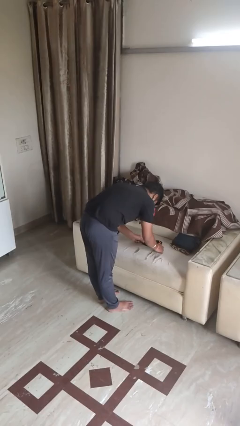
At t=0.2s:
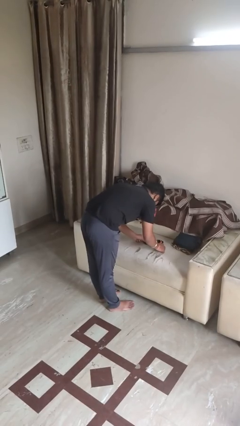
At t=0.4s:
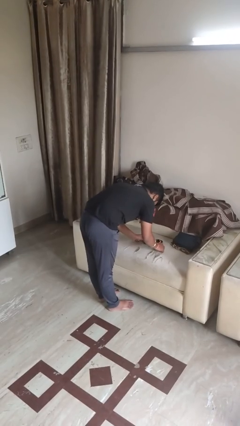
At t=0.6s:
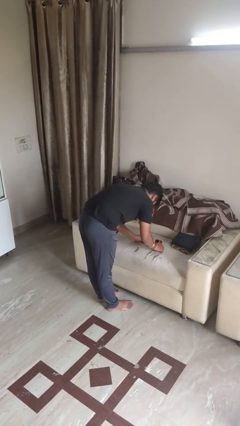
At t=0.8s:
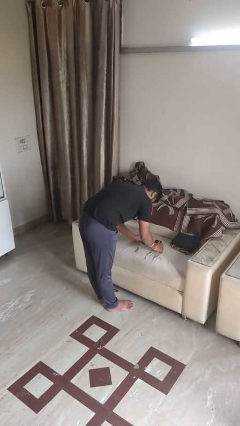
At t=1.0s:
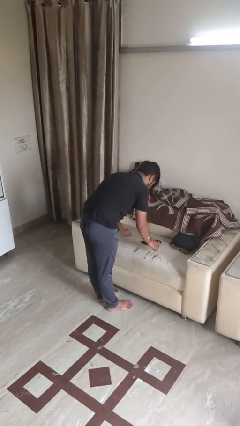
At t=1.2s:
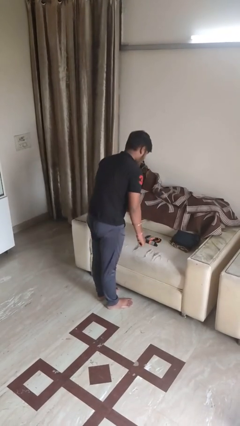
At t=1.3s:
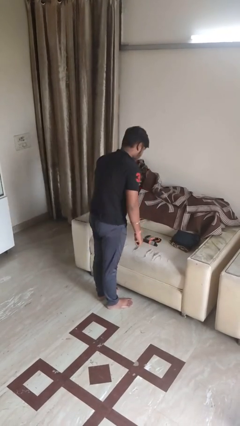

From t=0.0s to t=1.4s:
person folds socks

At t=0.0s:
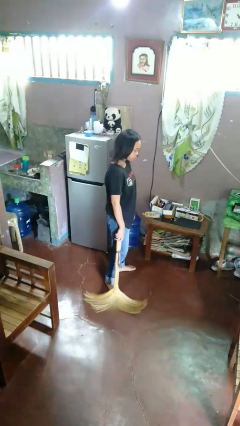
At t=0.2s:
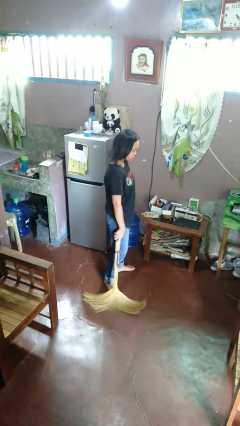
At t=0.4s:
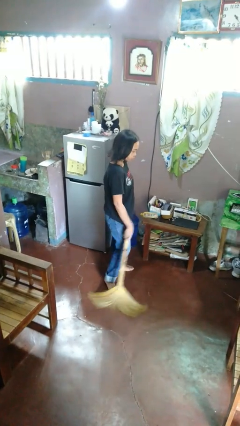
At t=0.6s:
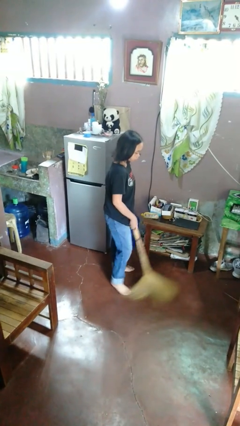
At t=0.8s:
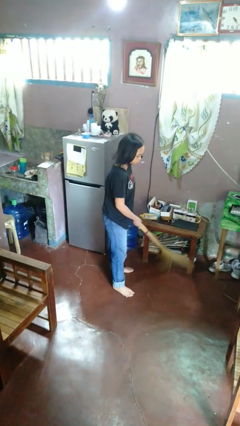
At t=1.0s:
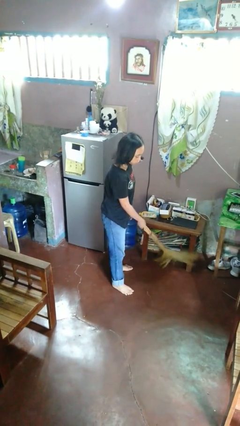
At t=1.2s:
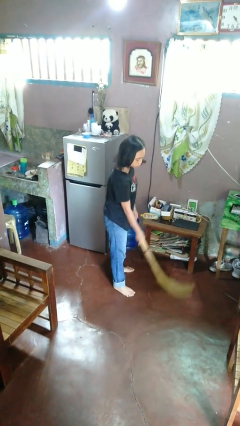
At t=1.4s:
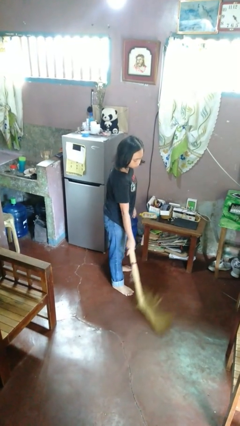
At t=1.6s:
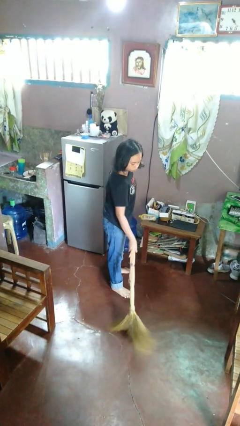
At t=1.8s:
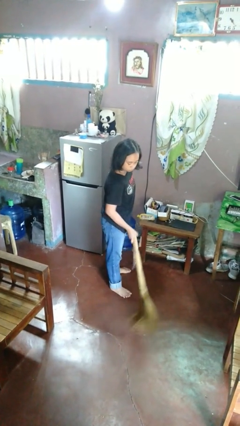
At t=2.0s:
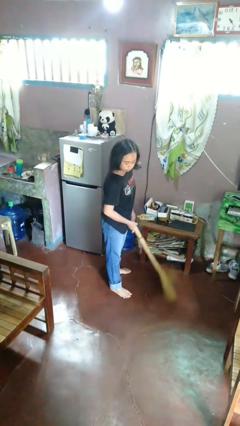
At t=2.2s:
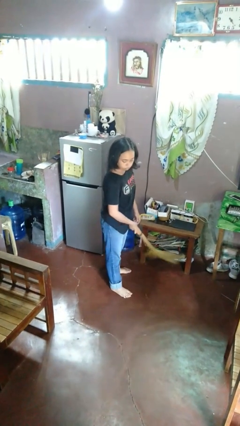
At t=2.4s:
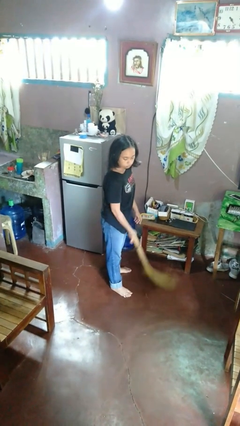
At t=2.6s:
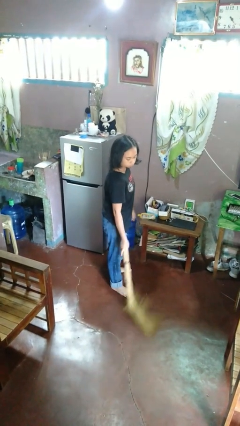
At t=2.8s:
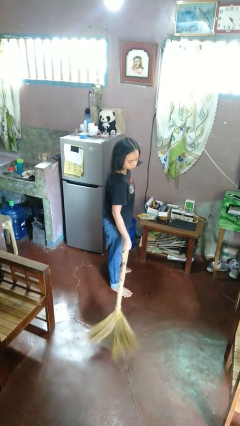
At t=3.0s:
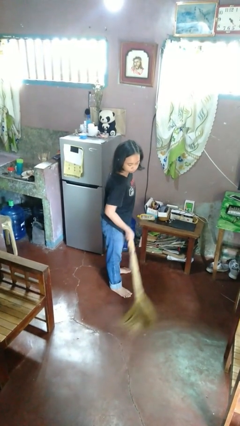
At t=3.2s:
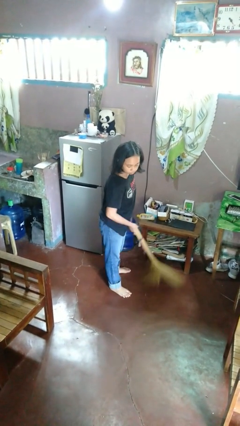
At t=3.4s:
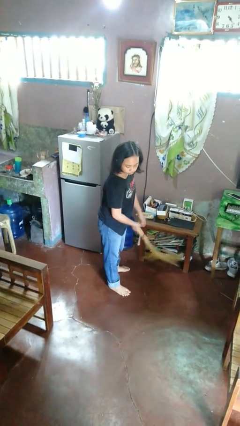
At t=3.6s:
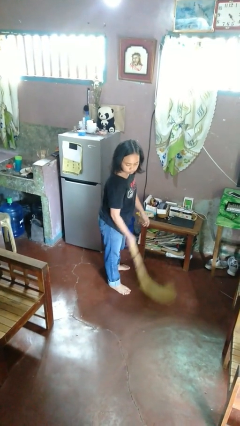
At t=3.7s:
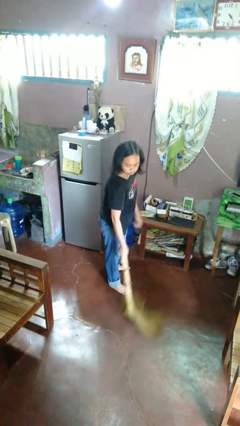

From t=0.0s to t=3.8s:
person sweeps floor

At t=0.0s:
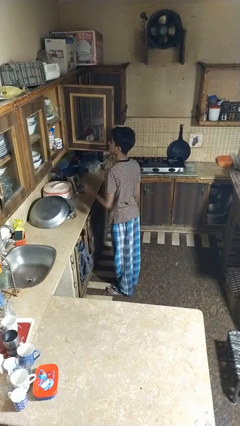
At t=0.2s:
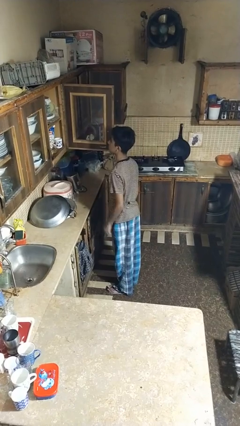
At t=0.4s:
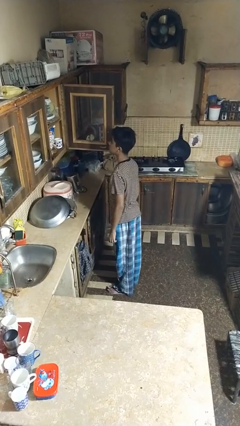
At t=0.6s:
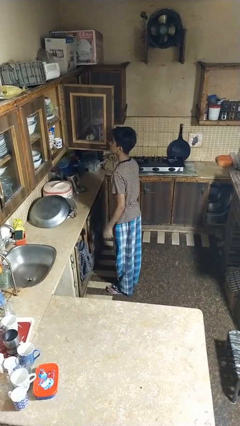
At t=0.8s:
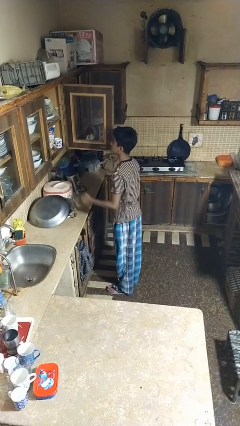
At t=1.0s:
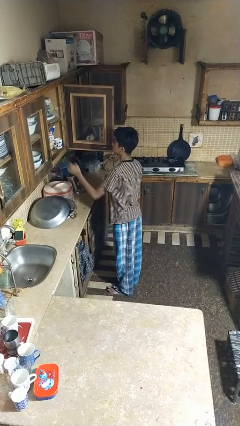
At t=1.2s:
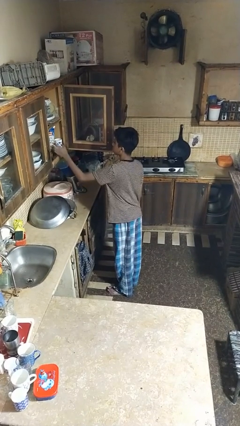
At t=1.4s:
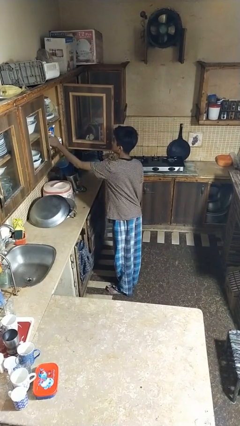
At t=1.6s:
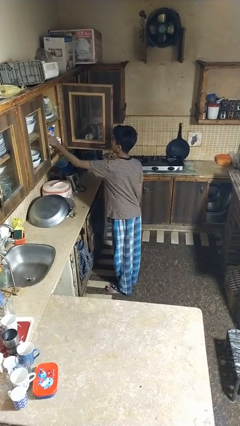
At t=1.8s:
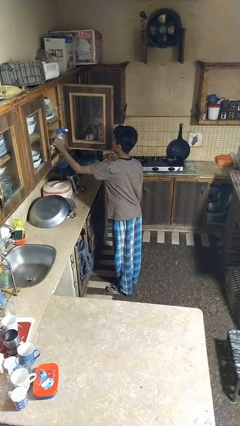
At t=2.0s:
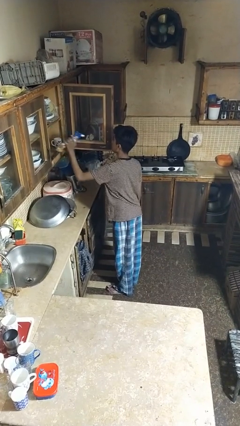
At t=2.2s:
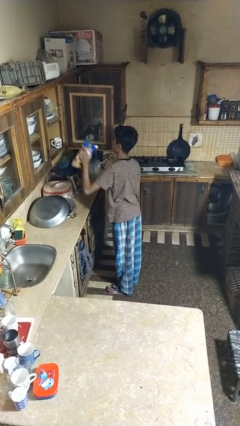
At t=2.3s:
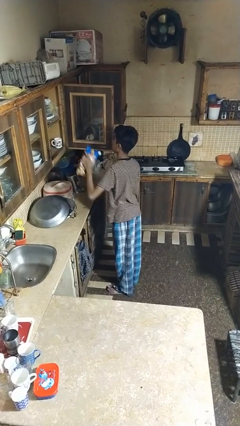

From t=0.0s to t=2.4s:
person takes object from cabinet

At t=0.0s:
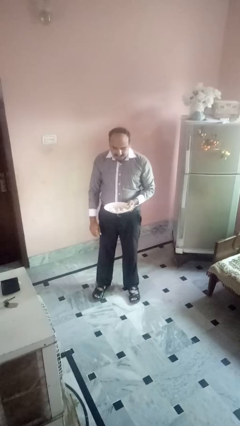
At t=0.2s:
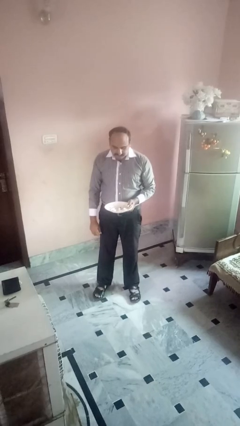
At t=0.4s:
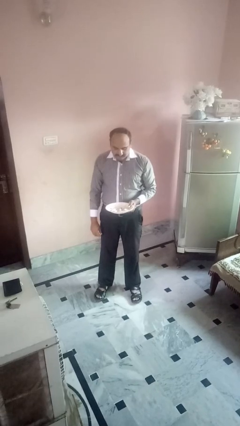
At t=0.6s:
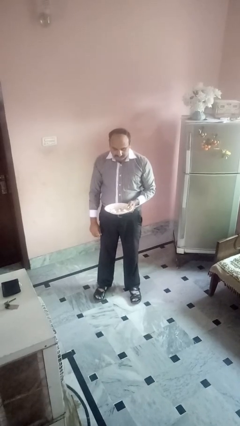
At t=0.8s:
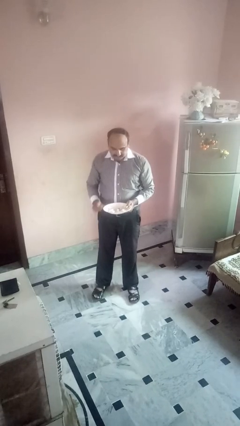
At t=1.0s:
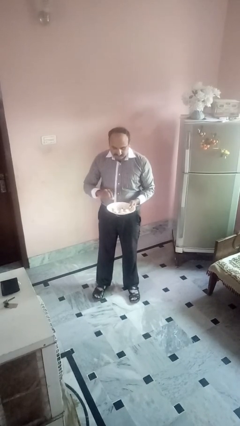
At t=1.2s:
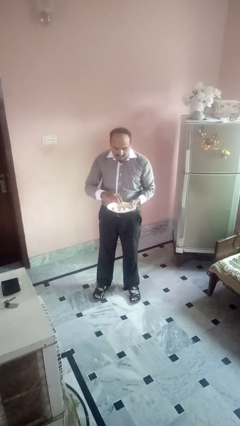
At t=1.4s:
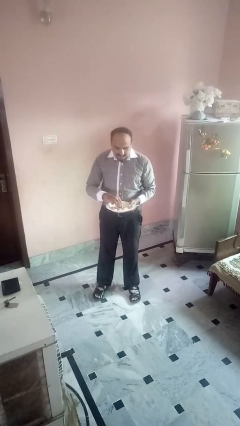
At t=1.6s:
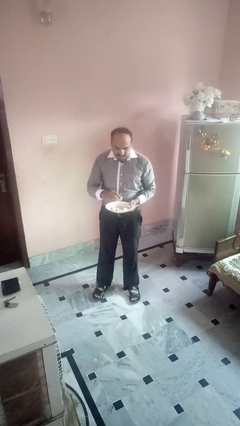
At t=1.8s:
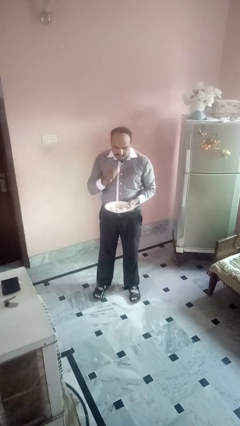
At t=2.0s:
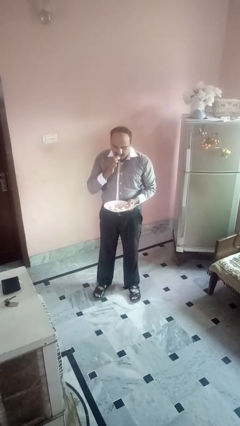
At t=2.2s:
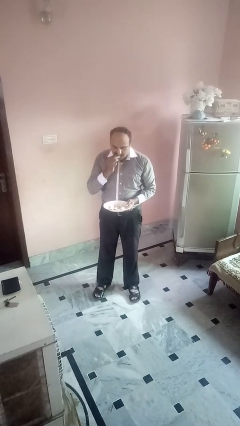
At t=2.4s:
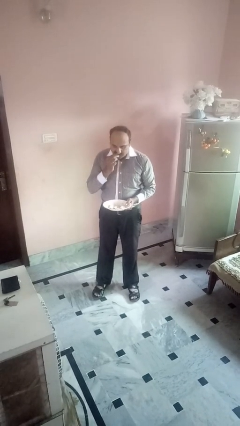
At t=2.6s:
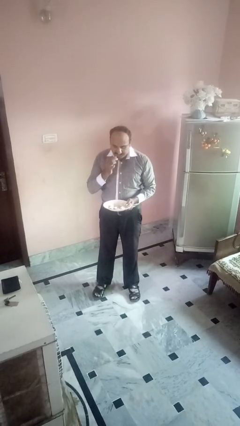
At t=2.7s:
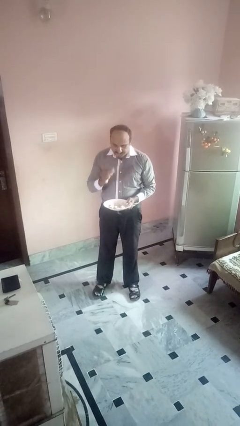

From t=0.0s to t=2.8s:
person eats with hands

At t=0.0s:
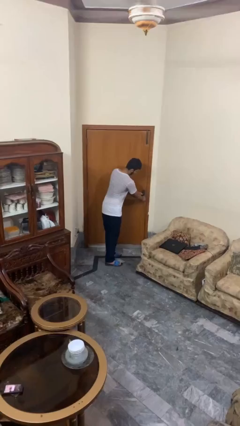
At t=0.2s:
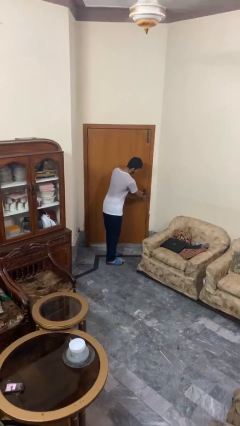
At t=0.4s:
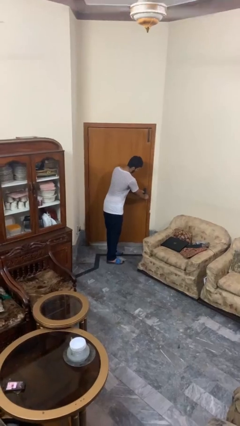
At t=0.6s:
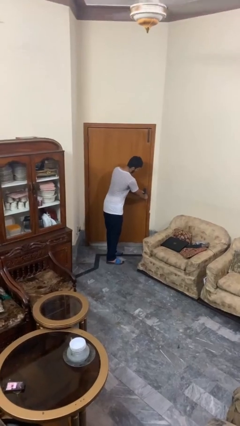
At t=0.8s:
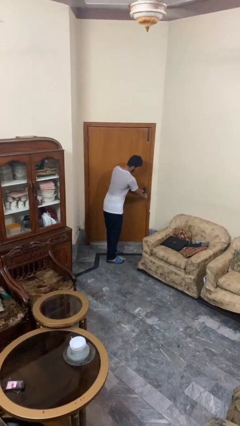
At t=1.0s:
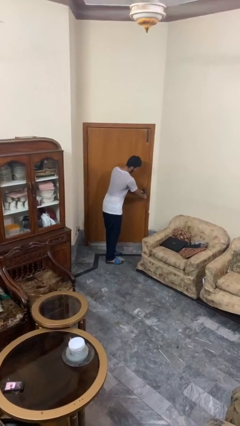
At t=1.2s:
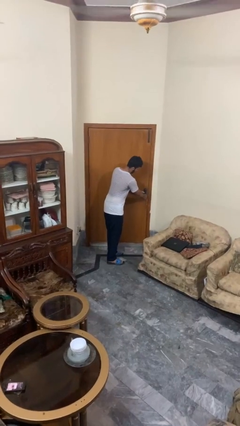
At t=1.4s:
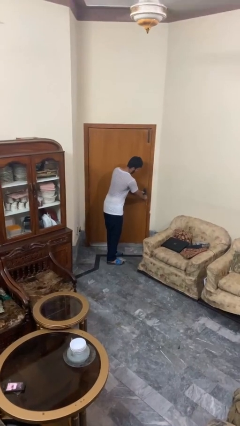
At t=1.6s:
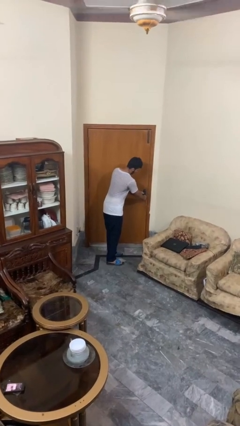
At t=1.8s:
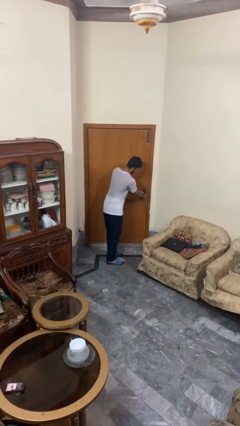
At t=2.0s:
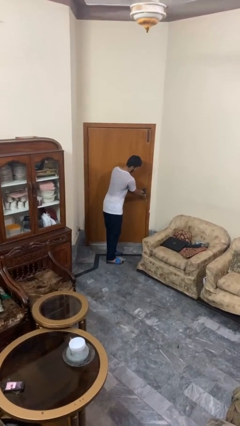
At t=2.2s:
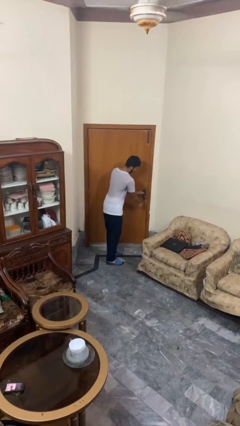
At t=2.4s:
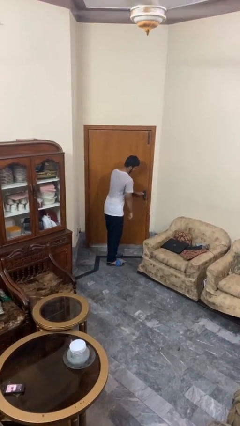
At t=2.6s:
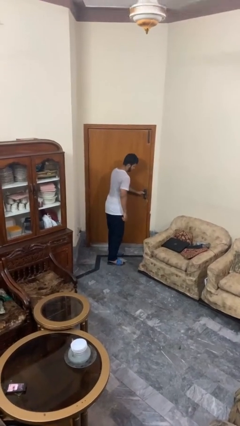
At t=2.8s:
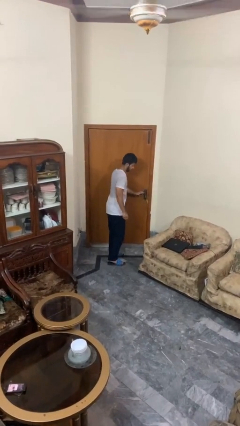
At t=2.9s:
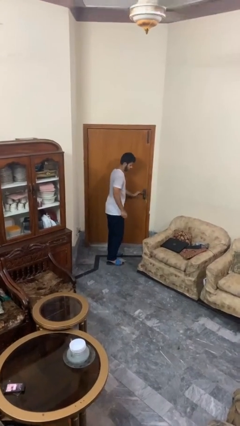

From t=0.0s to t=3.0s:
person locks door with keys

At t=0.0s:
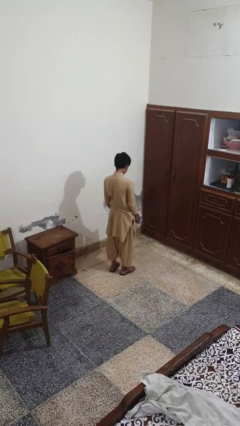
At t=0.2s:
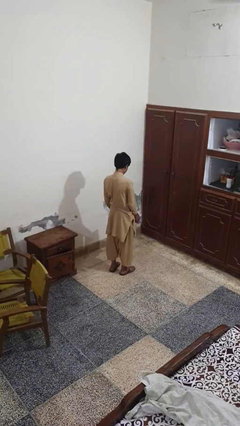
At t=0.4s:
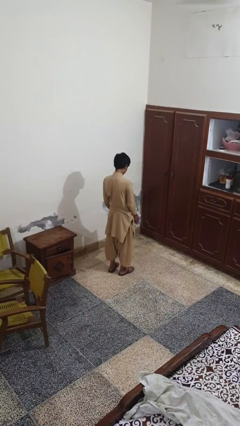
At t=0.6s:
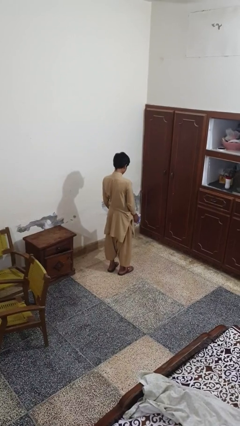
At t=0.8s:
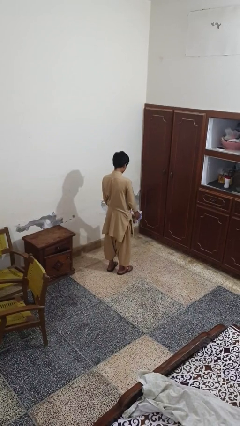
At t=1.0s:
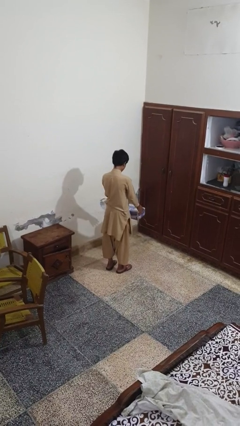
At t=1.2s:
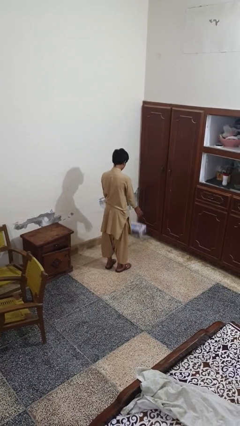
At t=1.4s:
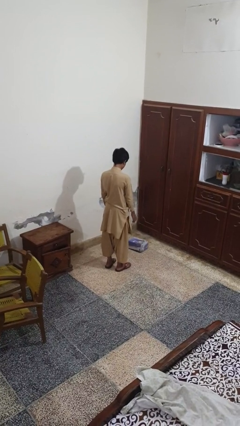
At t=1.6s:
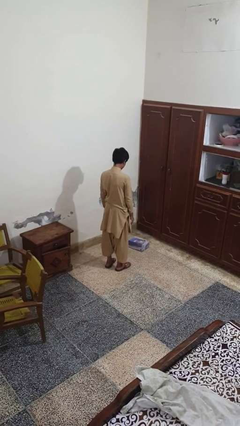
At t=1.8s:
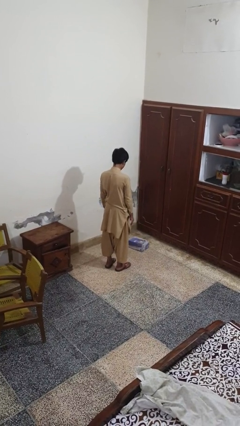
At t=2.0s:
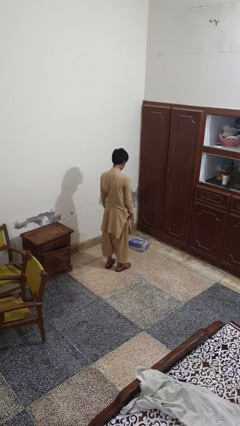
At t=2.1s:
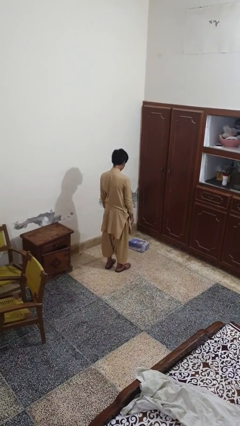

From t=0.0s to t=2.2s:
person throws object to ground

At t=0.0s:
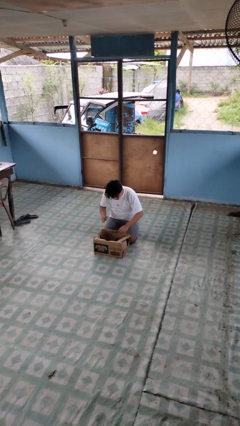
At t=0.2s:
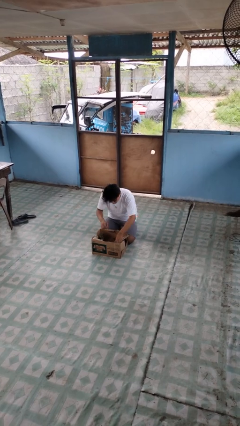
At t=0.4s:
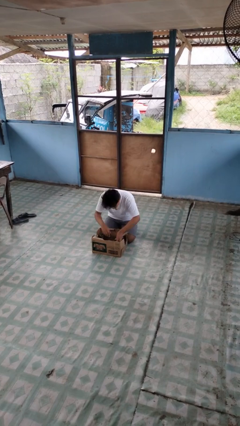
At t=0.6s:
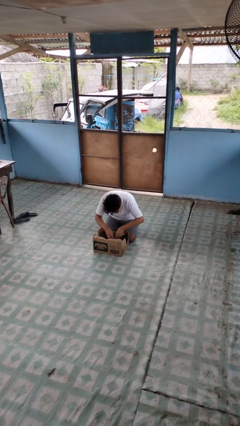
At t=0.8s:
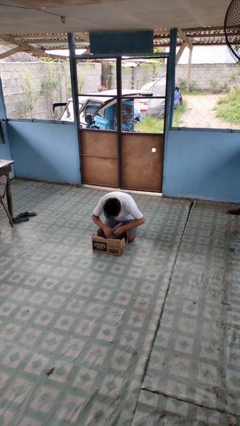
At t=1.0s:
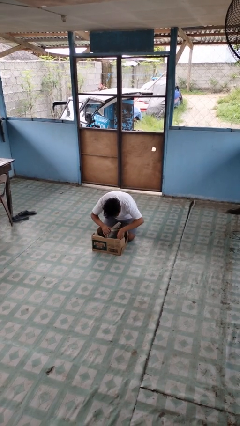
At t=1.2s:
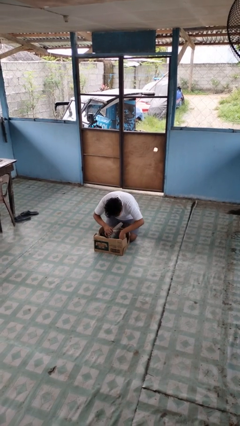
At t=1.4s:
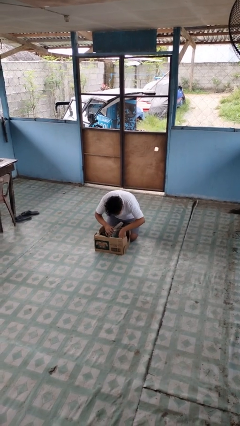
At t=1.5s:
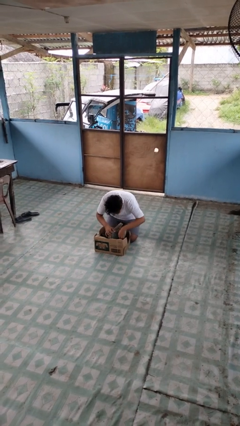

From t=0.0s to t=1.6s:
person searches in box
